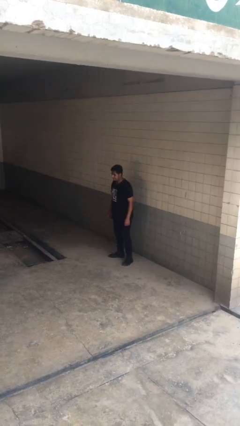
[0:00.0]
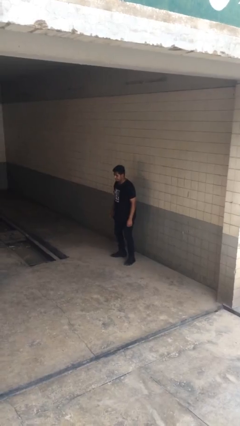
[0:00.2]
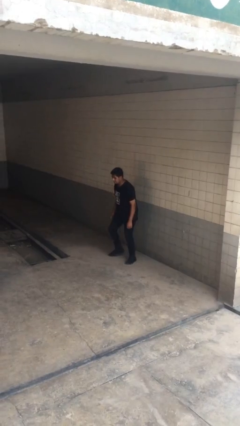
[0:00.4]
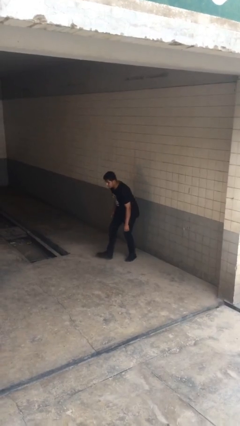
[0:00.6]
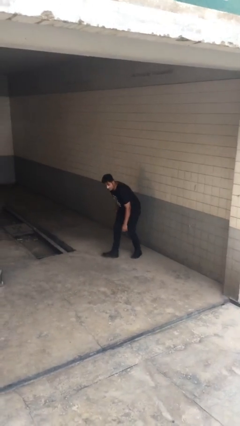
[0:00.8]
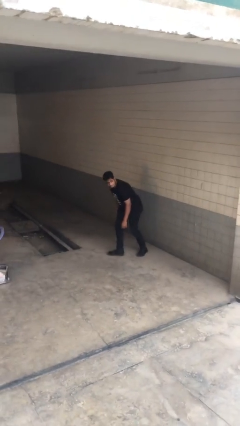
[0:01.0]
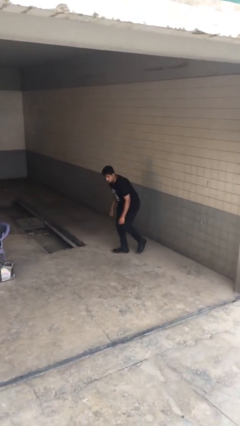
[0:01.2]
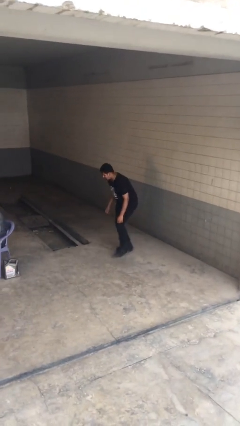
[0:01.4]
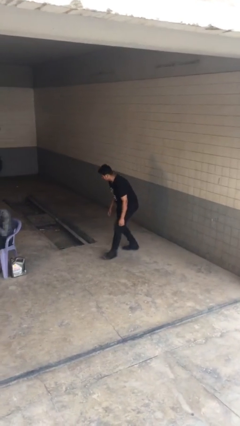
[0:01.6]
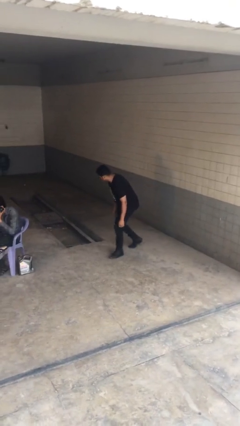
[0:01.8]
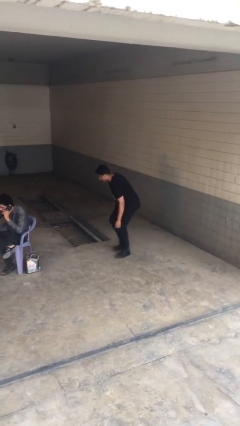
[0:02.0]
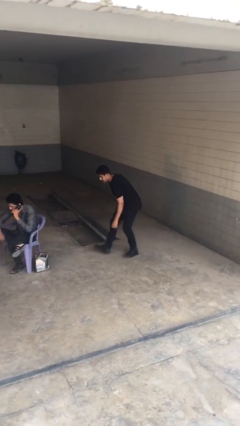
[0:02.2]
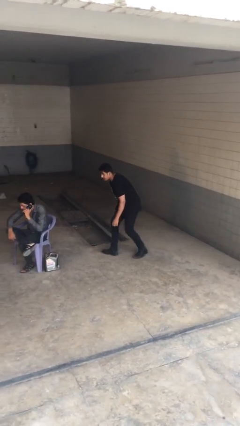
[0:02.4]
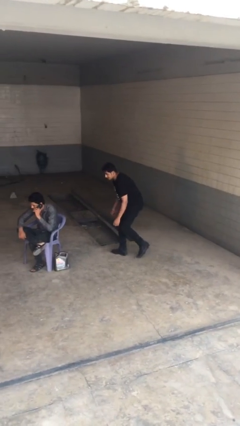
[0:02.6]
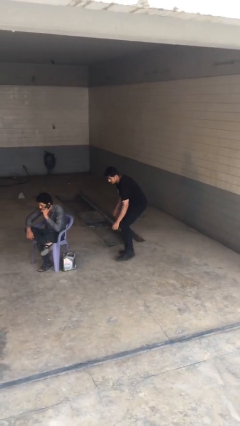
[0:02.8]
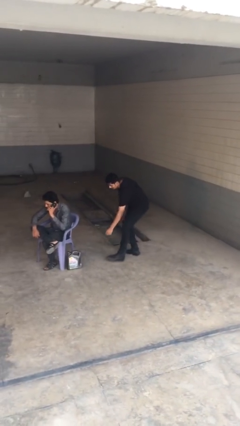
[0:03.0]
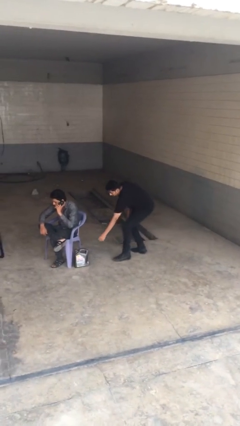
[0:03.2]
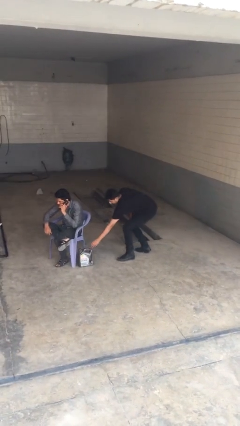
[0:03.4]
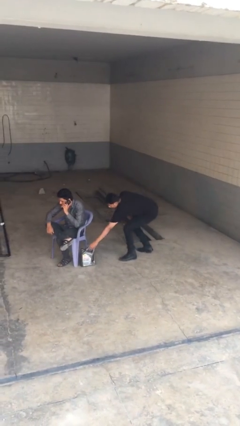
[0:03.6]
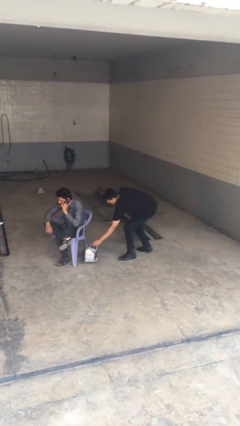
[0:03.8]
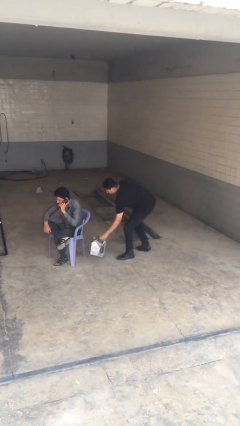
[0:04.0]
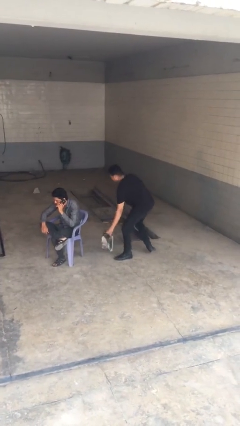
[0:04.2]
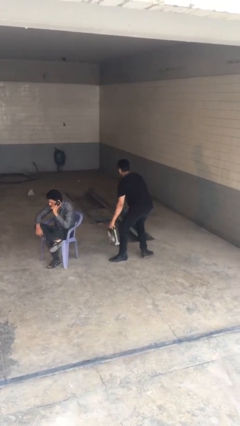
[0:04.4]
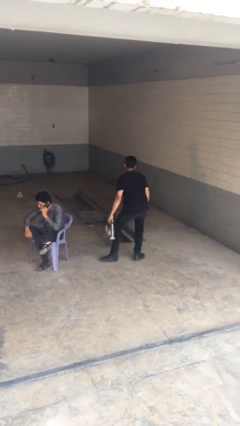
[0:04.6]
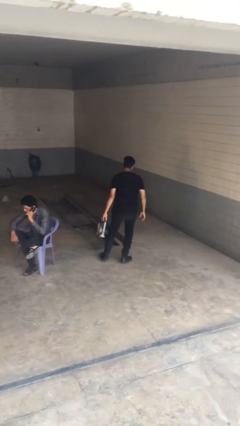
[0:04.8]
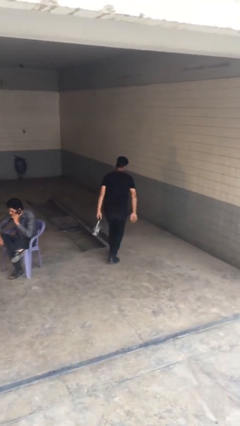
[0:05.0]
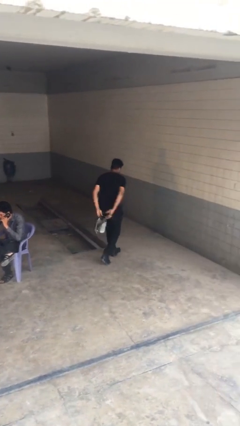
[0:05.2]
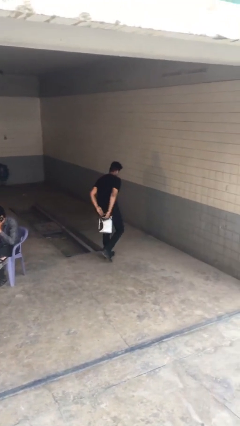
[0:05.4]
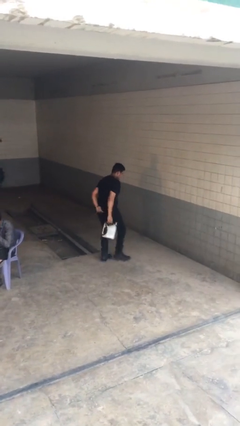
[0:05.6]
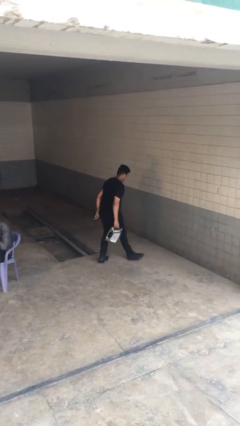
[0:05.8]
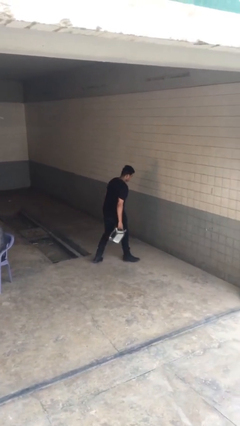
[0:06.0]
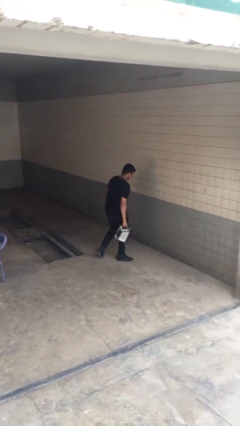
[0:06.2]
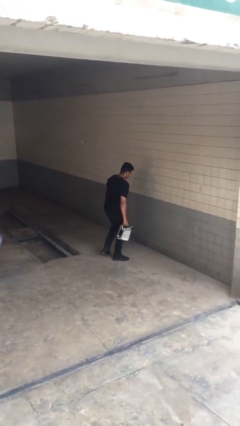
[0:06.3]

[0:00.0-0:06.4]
person steals object from person

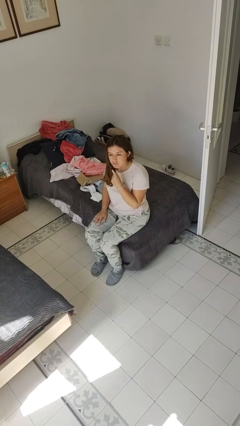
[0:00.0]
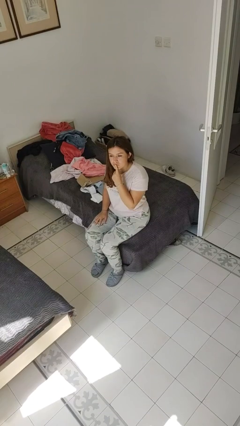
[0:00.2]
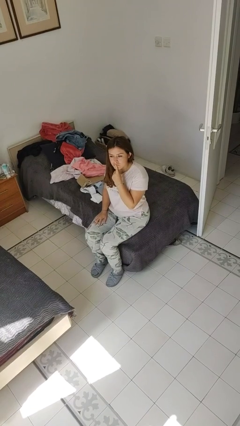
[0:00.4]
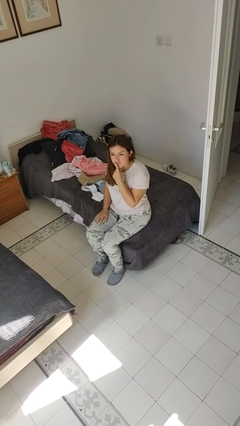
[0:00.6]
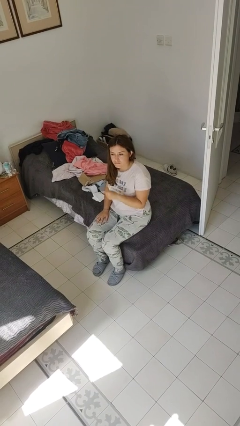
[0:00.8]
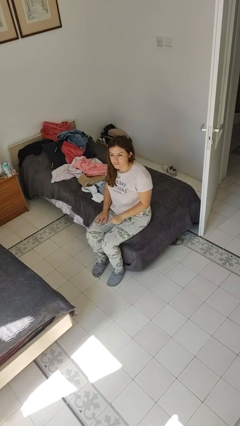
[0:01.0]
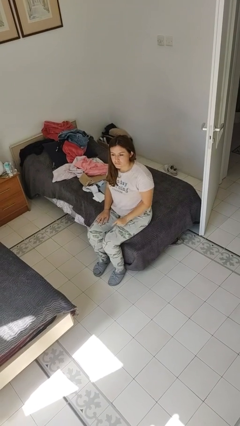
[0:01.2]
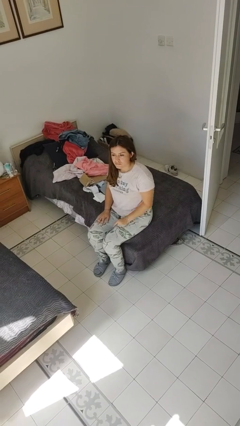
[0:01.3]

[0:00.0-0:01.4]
person gestures be quiet

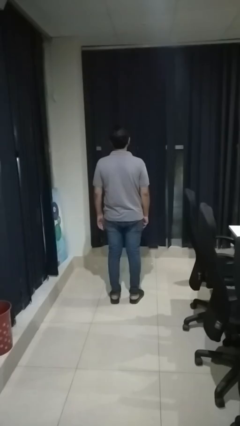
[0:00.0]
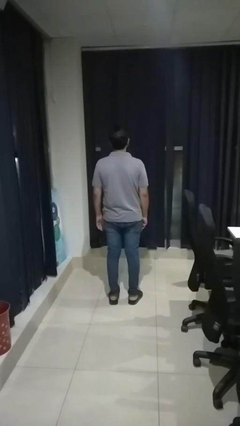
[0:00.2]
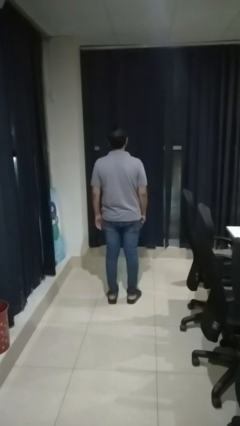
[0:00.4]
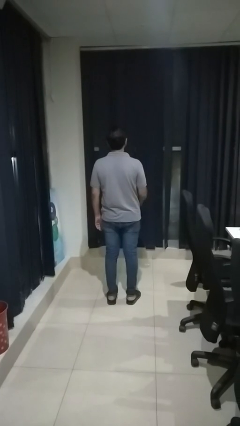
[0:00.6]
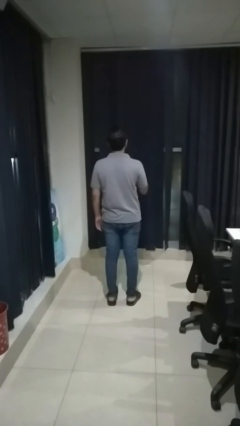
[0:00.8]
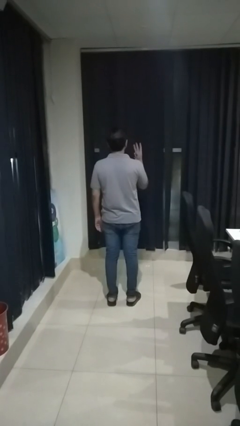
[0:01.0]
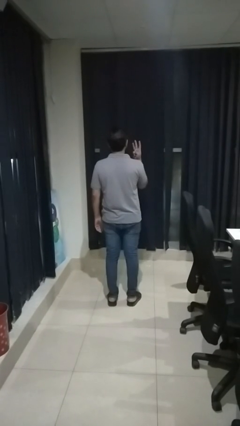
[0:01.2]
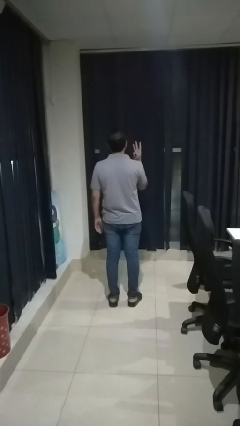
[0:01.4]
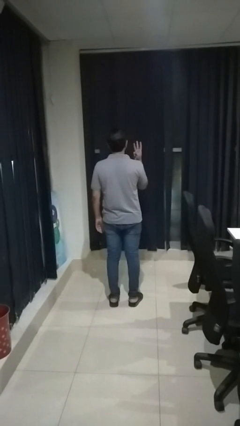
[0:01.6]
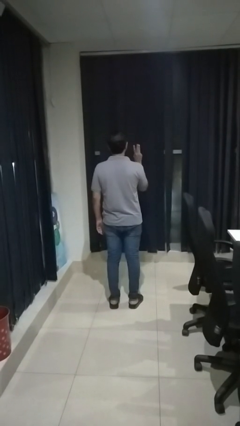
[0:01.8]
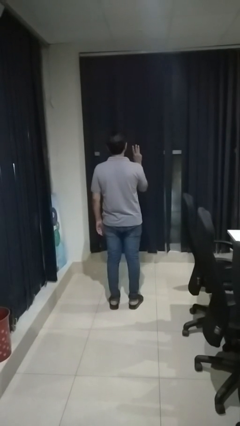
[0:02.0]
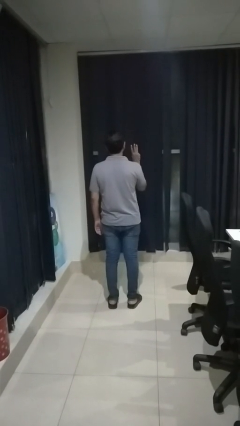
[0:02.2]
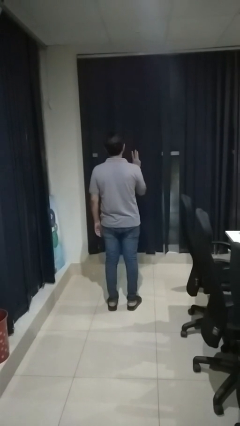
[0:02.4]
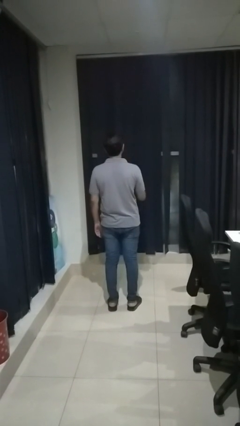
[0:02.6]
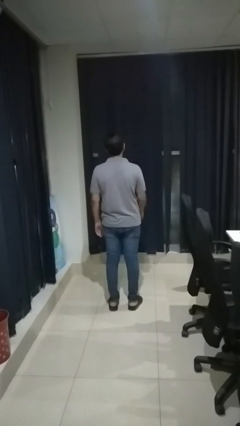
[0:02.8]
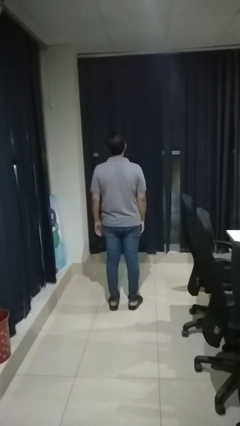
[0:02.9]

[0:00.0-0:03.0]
person gestures number three

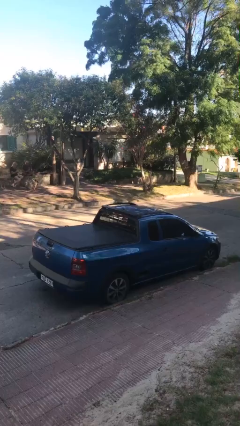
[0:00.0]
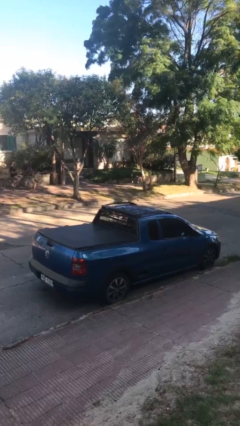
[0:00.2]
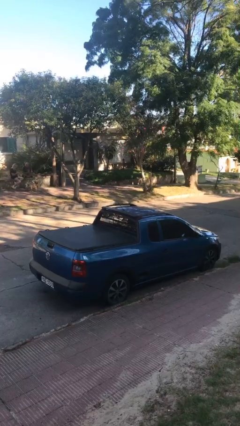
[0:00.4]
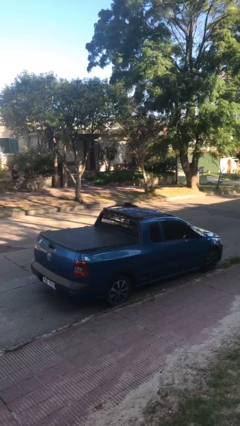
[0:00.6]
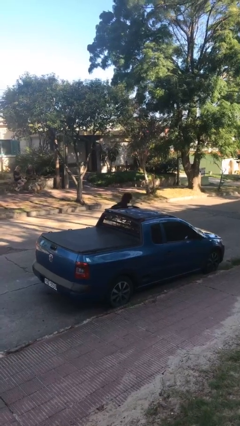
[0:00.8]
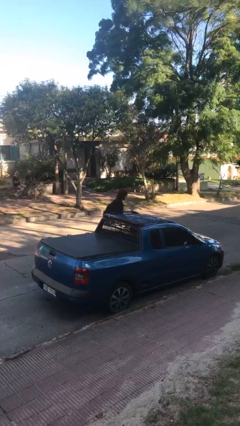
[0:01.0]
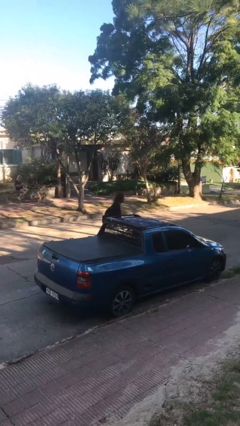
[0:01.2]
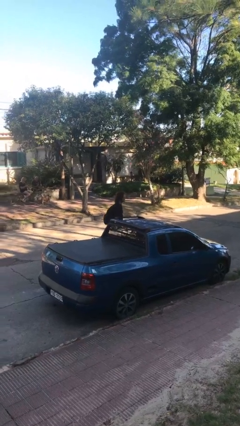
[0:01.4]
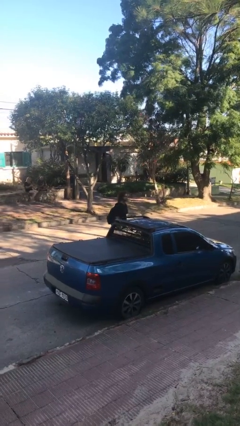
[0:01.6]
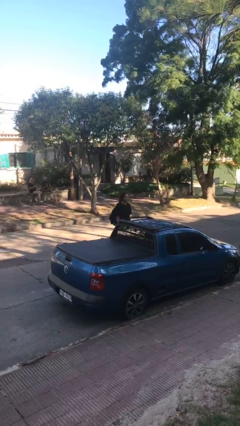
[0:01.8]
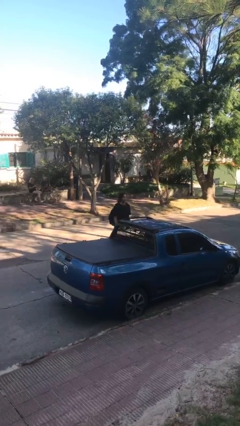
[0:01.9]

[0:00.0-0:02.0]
person exits car

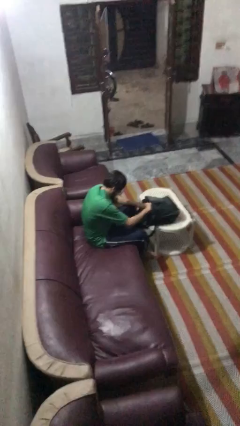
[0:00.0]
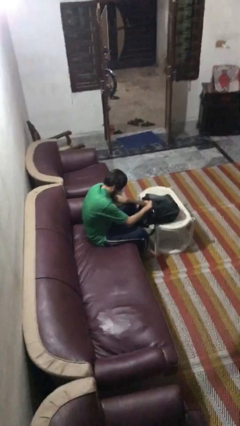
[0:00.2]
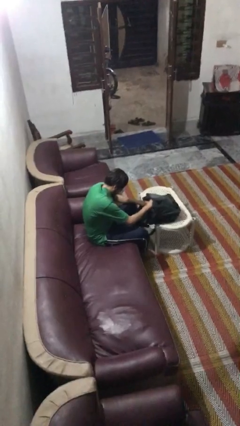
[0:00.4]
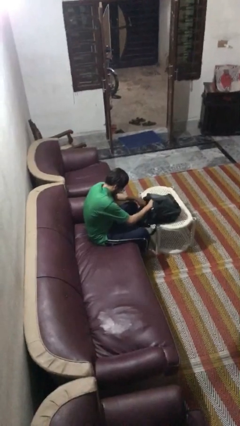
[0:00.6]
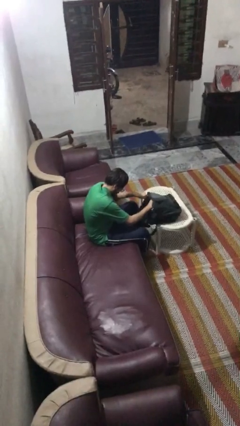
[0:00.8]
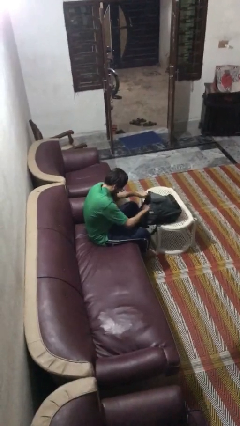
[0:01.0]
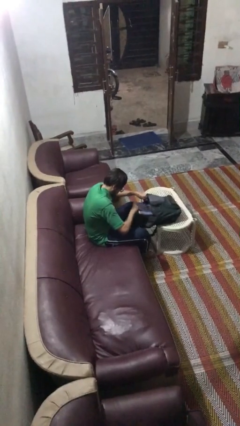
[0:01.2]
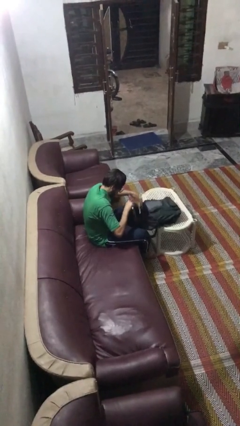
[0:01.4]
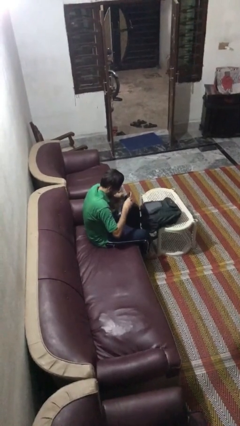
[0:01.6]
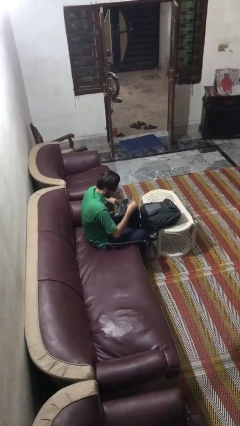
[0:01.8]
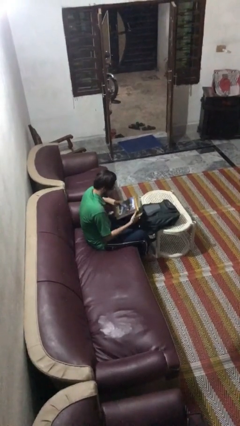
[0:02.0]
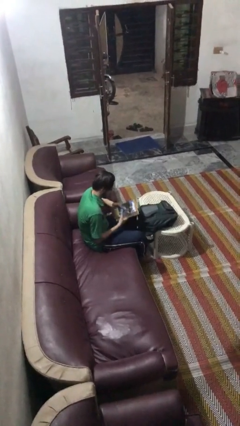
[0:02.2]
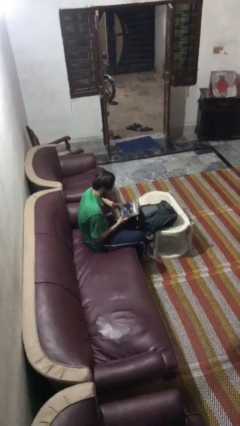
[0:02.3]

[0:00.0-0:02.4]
person takes object from backpack

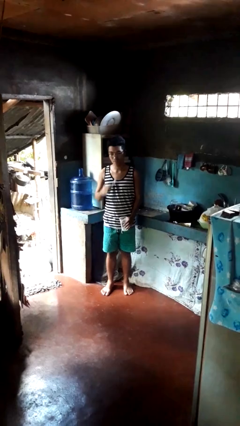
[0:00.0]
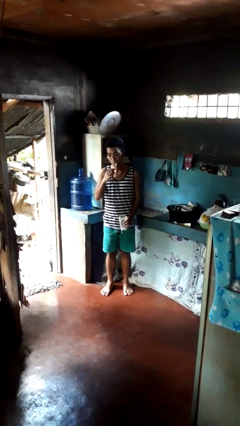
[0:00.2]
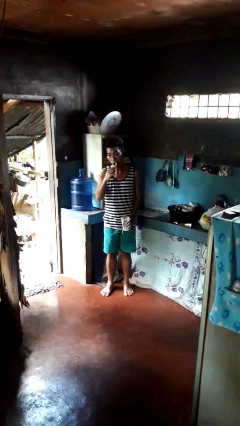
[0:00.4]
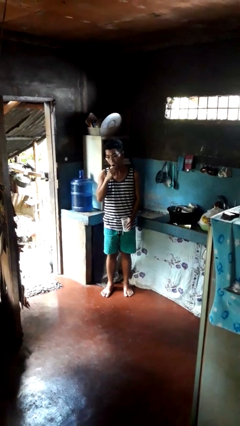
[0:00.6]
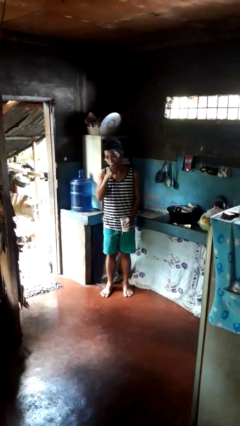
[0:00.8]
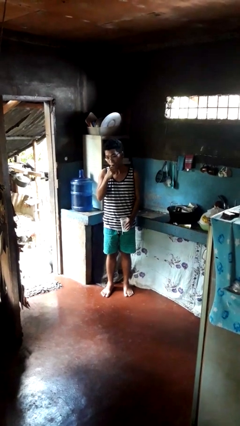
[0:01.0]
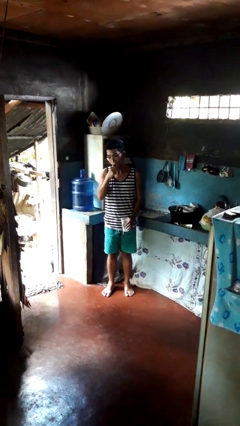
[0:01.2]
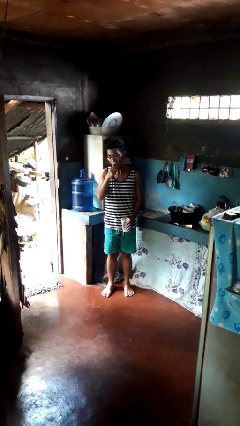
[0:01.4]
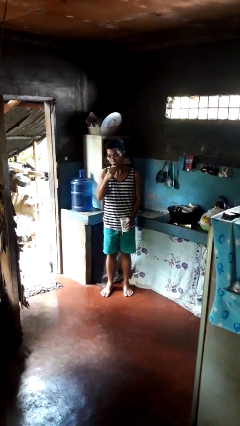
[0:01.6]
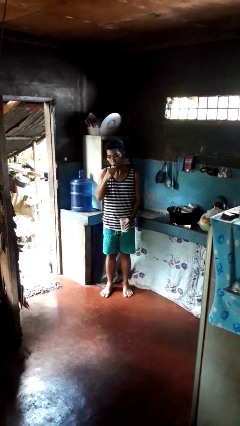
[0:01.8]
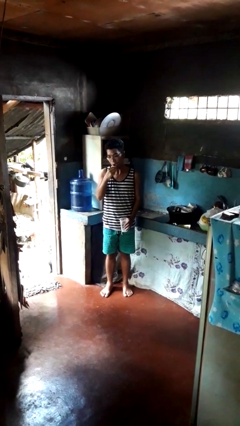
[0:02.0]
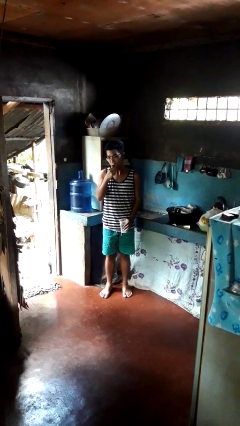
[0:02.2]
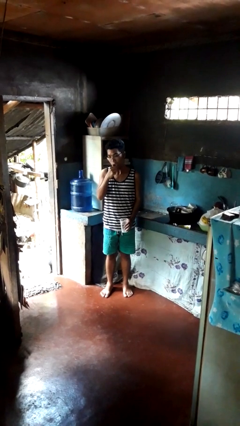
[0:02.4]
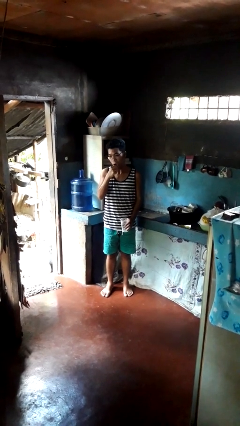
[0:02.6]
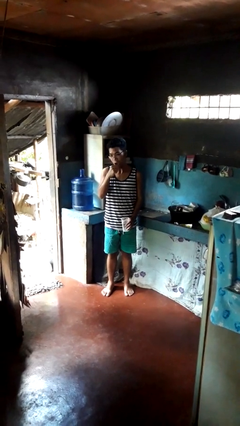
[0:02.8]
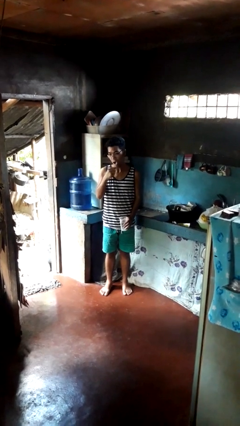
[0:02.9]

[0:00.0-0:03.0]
person brushes teeth
